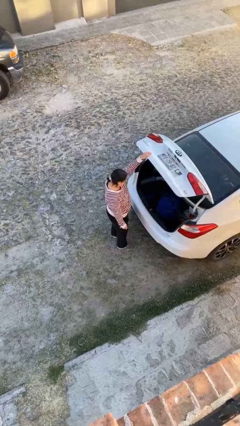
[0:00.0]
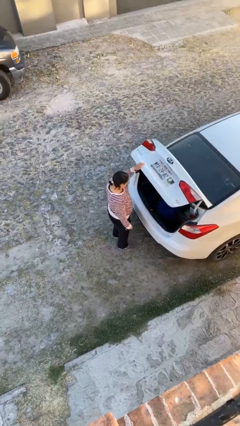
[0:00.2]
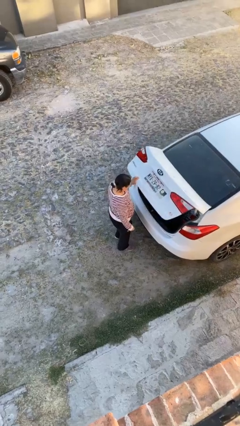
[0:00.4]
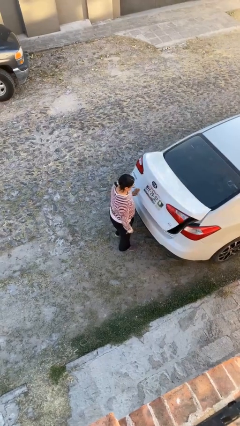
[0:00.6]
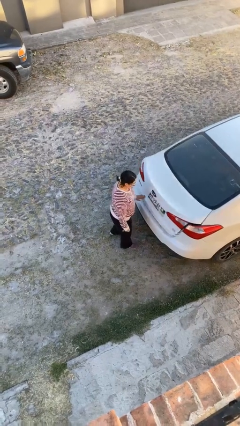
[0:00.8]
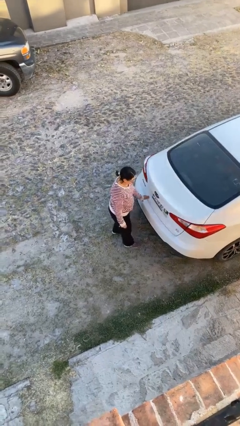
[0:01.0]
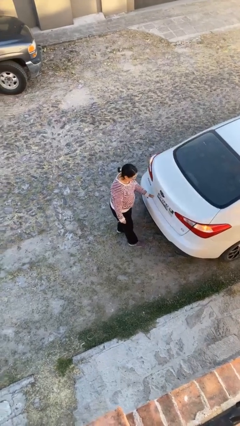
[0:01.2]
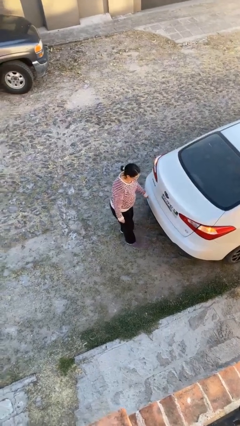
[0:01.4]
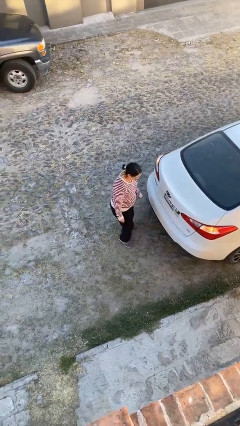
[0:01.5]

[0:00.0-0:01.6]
person closes car trunk

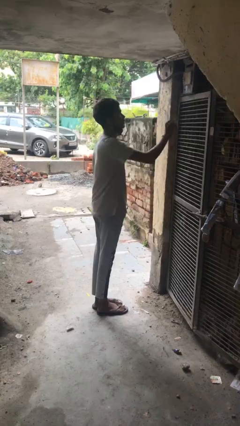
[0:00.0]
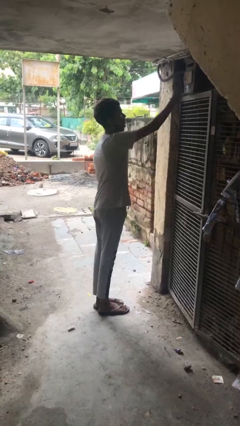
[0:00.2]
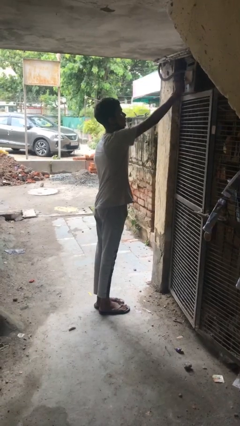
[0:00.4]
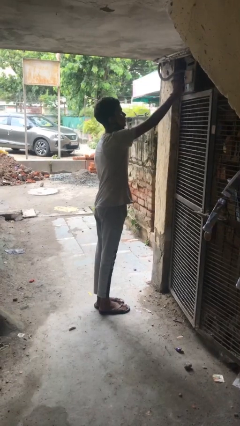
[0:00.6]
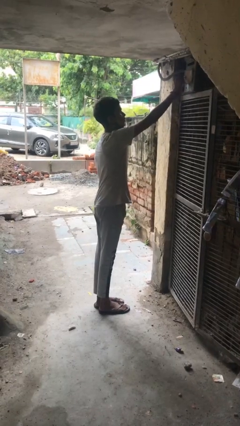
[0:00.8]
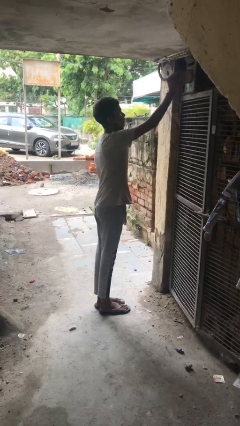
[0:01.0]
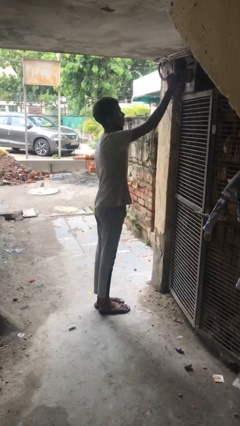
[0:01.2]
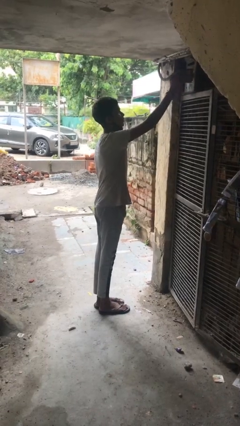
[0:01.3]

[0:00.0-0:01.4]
person opens mailbox

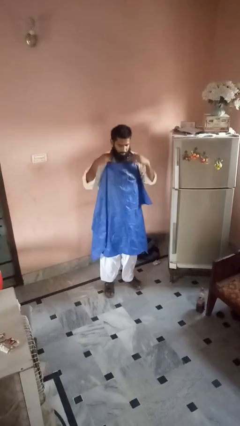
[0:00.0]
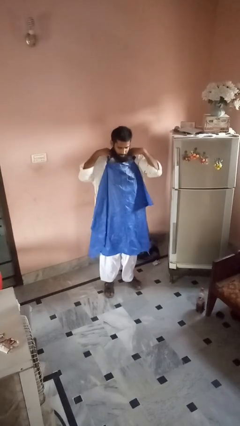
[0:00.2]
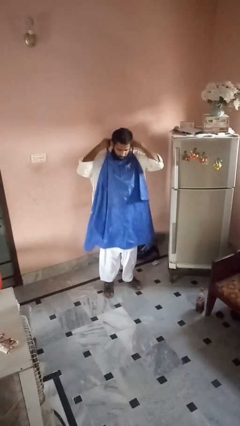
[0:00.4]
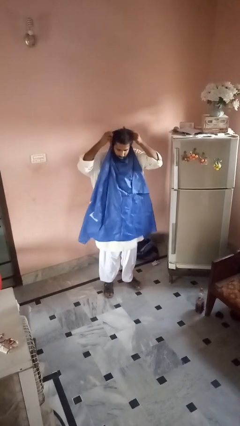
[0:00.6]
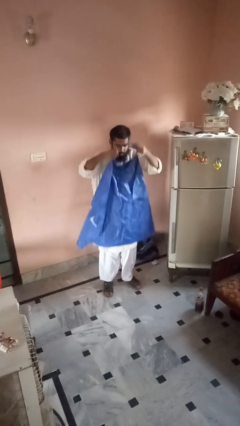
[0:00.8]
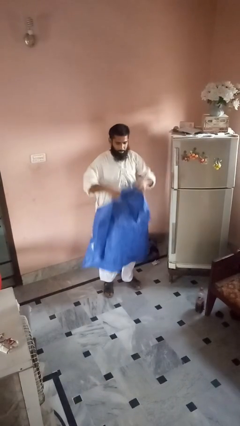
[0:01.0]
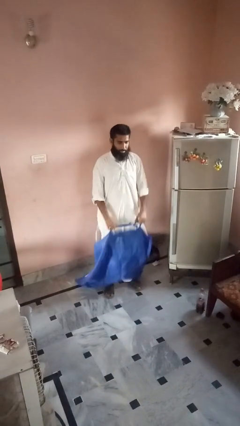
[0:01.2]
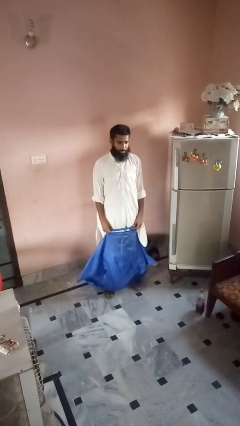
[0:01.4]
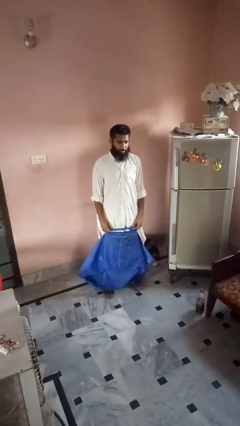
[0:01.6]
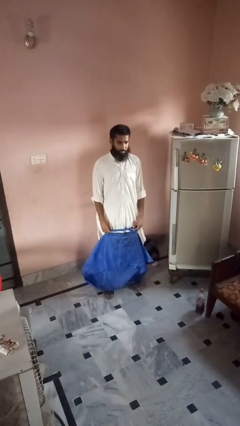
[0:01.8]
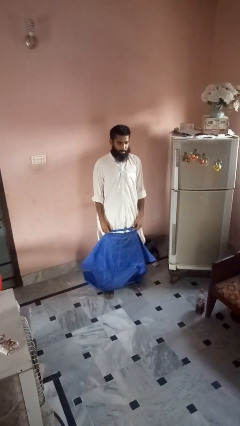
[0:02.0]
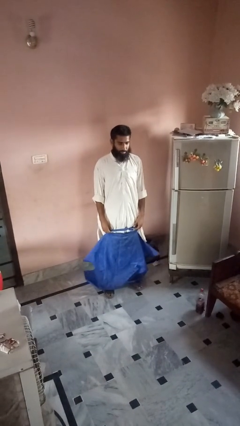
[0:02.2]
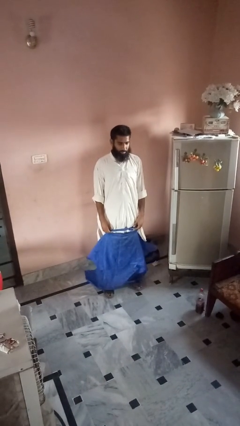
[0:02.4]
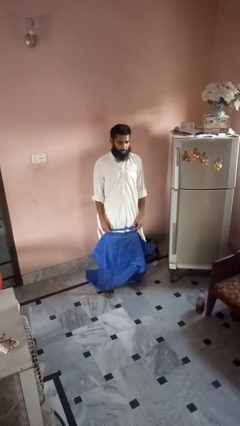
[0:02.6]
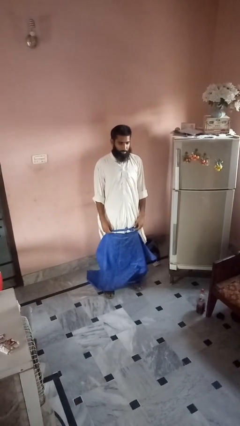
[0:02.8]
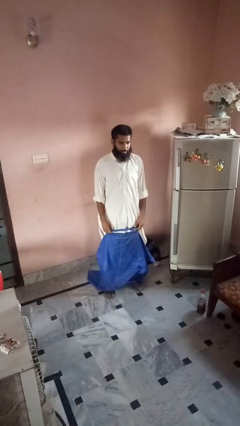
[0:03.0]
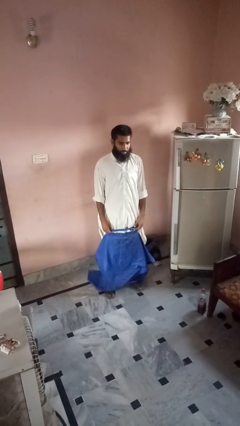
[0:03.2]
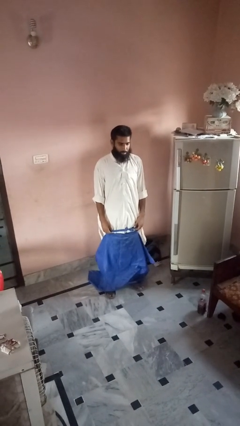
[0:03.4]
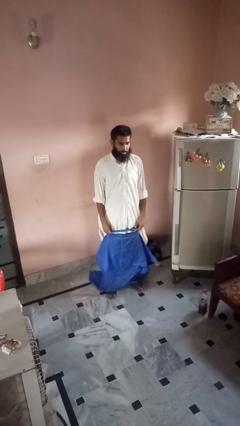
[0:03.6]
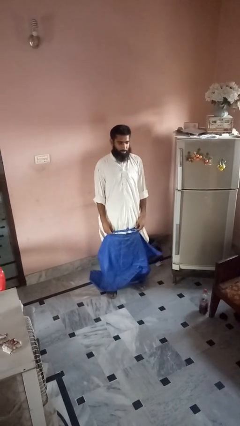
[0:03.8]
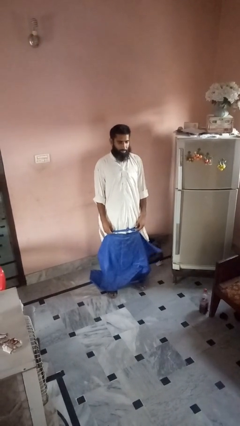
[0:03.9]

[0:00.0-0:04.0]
person takes off apron

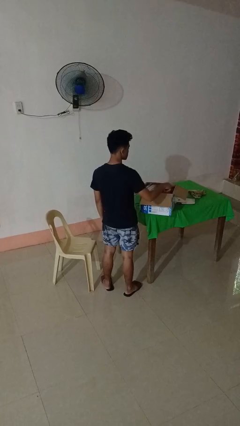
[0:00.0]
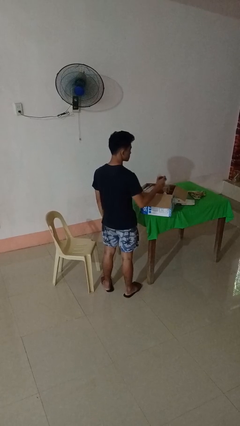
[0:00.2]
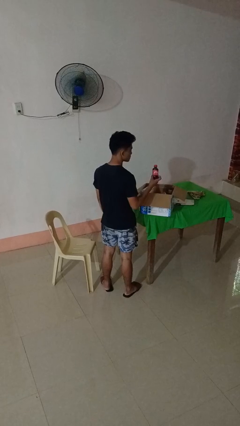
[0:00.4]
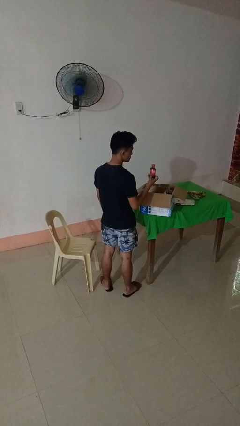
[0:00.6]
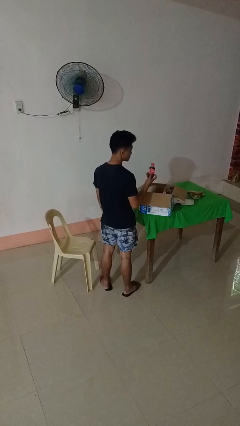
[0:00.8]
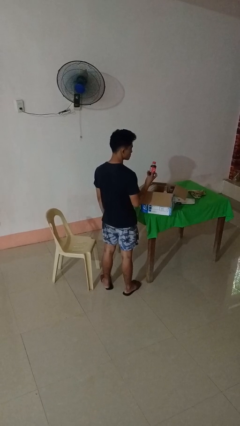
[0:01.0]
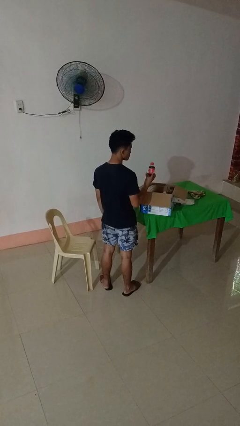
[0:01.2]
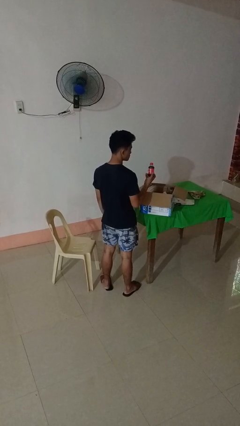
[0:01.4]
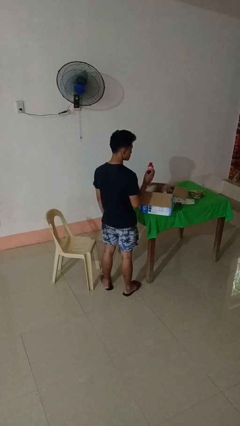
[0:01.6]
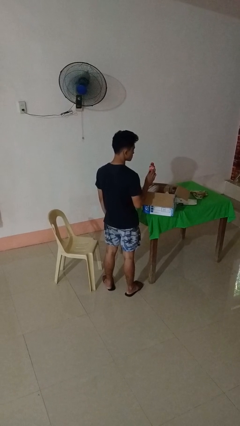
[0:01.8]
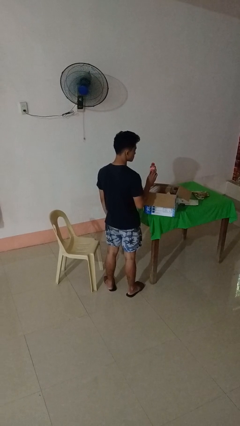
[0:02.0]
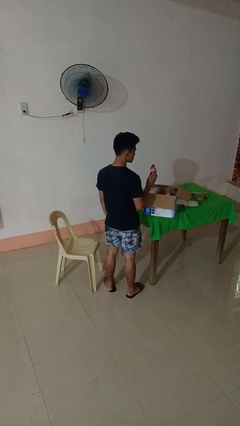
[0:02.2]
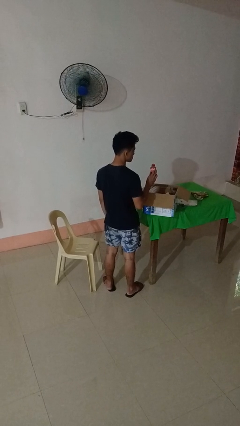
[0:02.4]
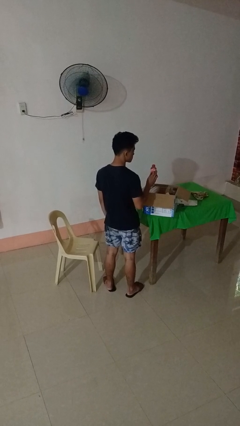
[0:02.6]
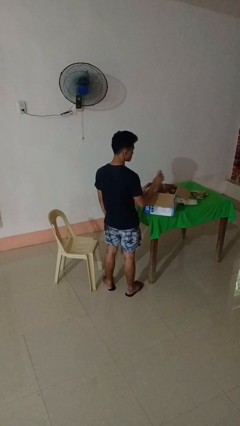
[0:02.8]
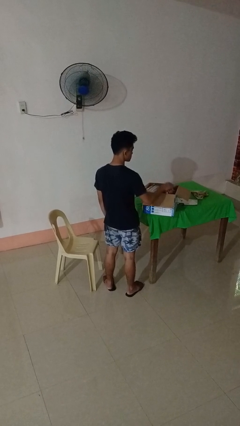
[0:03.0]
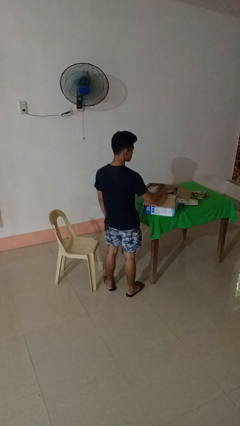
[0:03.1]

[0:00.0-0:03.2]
person takes object from box

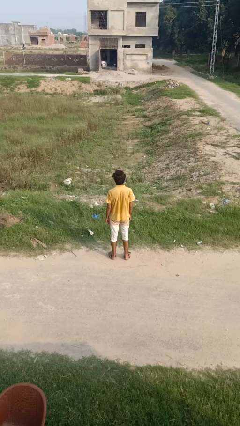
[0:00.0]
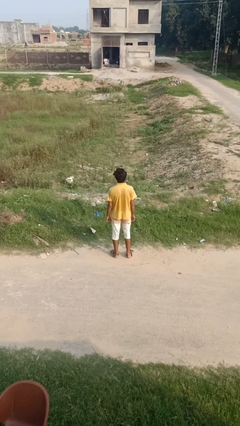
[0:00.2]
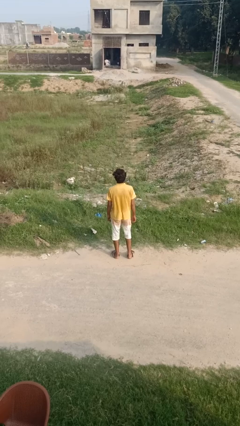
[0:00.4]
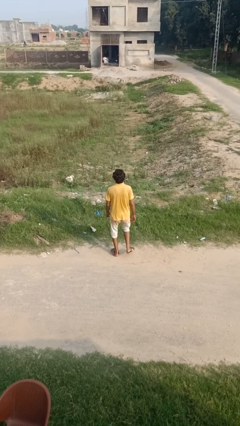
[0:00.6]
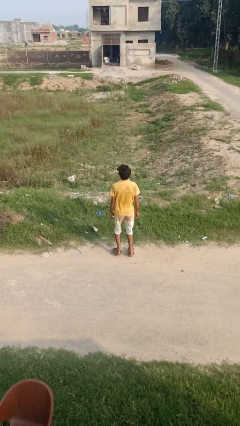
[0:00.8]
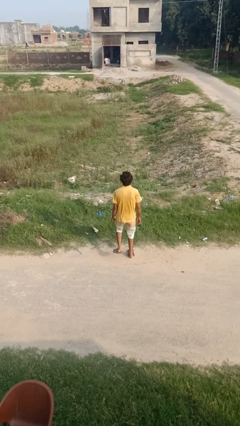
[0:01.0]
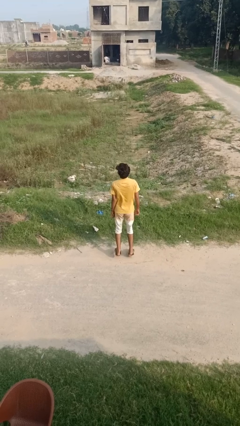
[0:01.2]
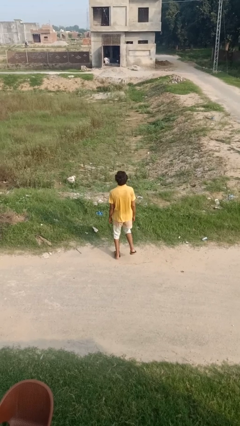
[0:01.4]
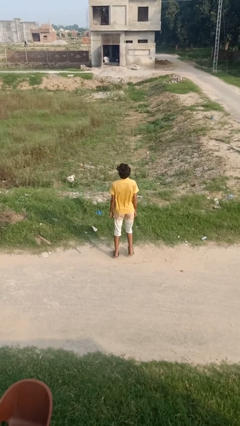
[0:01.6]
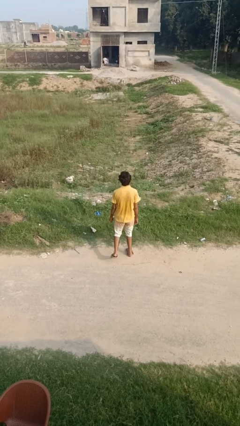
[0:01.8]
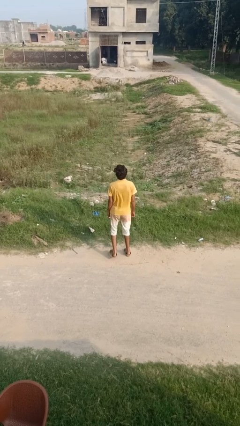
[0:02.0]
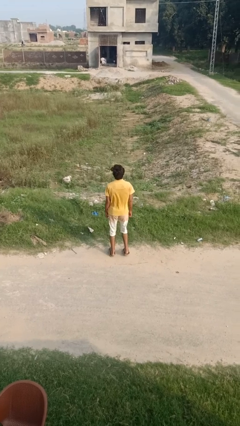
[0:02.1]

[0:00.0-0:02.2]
person dances in place

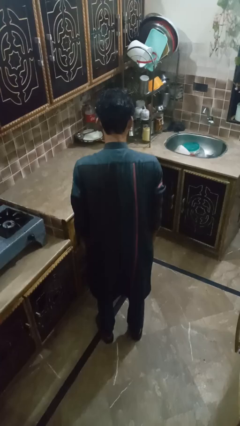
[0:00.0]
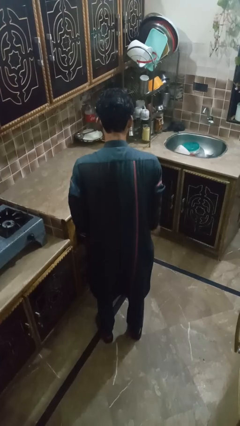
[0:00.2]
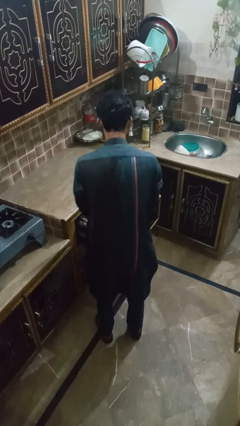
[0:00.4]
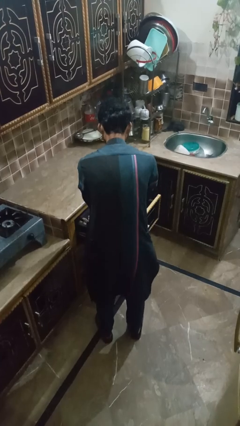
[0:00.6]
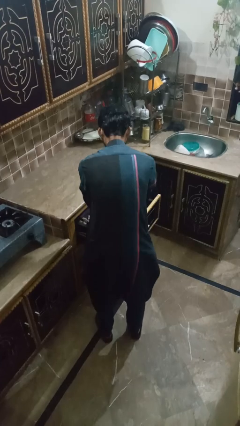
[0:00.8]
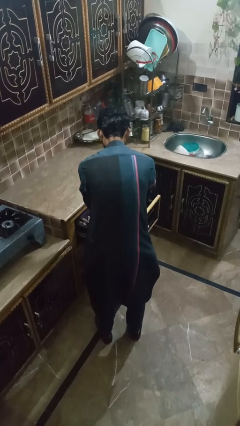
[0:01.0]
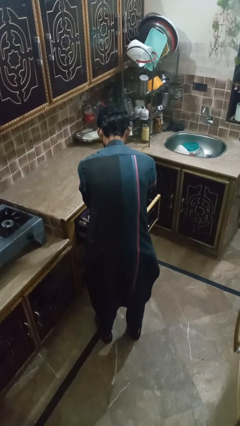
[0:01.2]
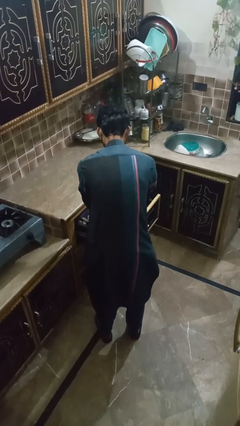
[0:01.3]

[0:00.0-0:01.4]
person searches in kitchen drawer

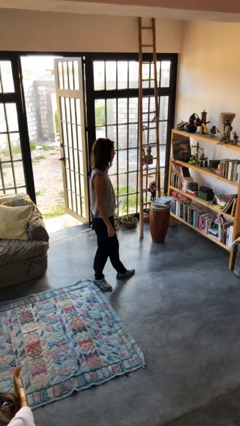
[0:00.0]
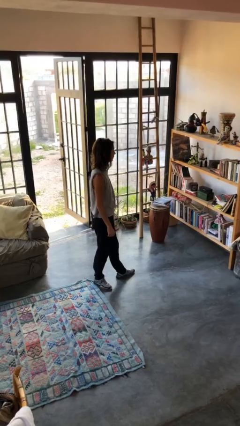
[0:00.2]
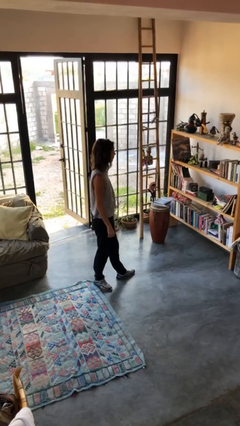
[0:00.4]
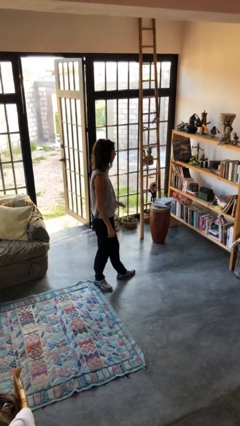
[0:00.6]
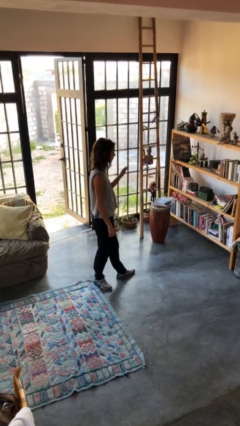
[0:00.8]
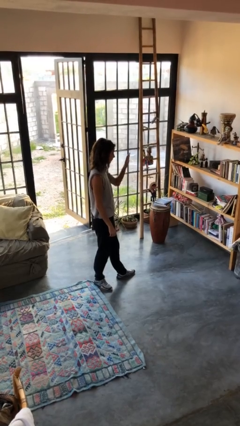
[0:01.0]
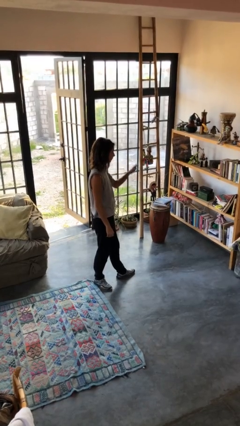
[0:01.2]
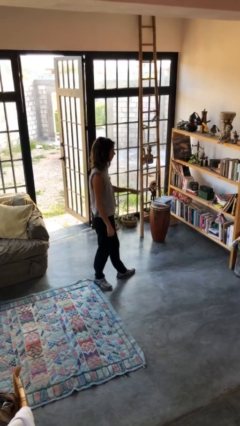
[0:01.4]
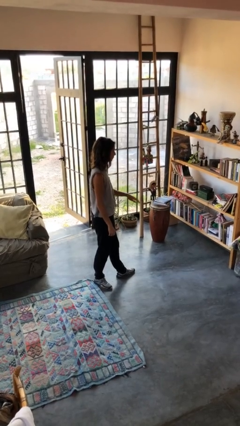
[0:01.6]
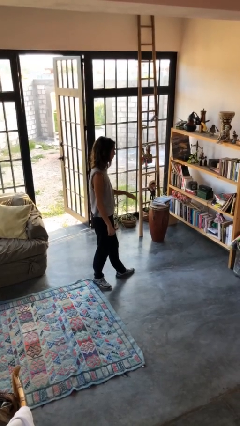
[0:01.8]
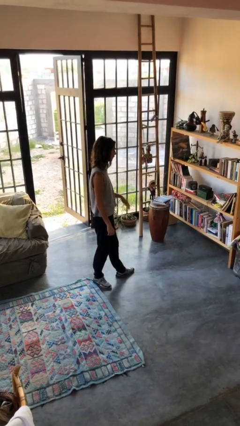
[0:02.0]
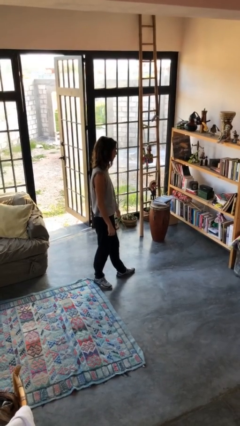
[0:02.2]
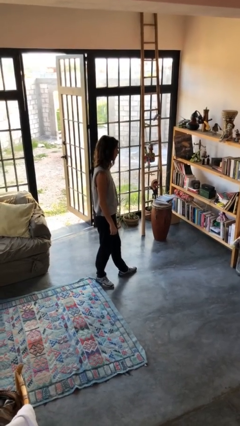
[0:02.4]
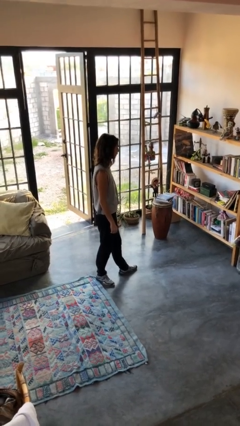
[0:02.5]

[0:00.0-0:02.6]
person gestures swipe down

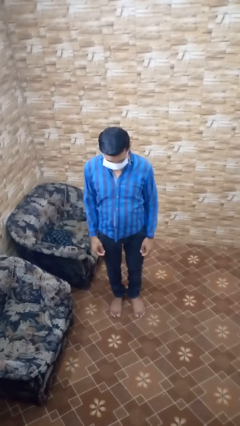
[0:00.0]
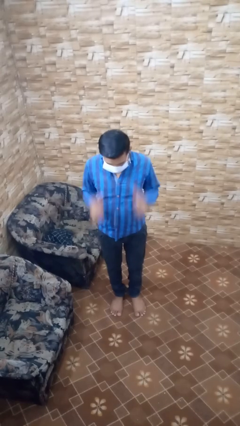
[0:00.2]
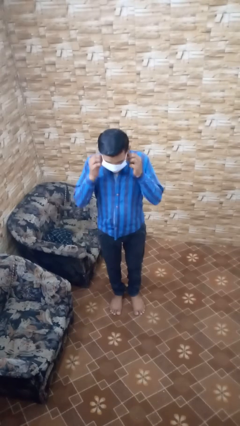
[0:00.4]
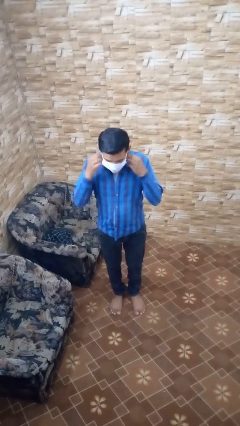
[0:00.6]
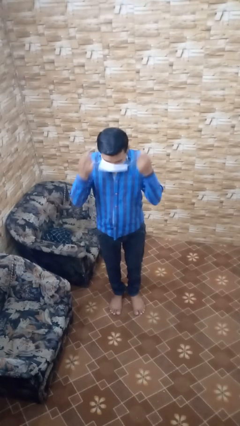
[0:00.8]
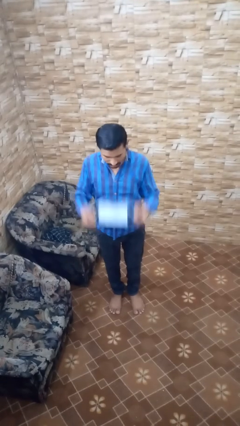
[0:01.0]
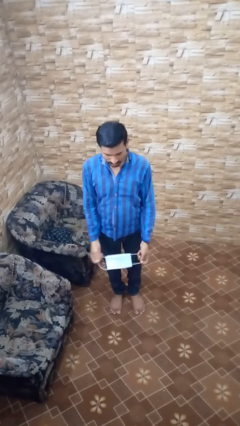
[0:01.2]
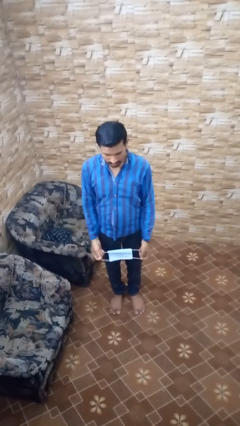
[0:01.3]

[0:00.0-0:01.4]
person takes off facemask
